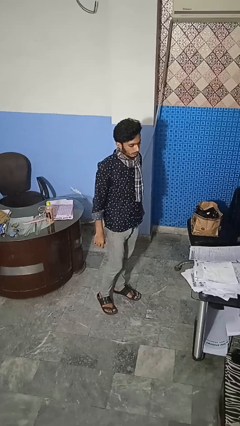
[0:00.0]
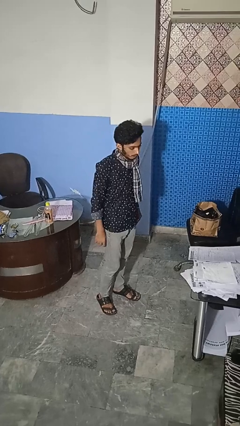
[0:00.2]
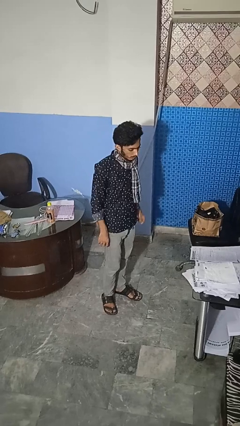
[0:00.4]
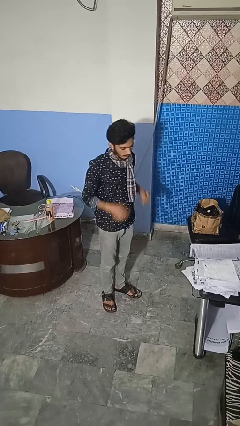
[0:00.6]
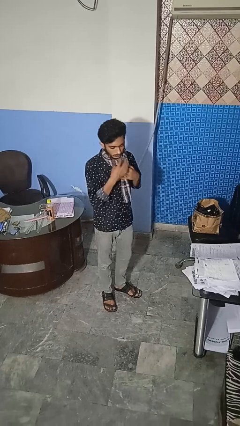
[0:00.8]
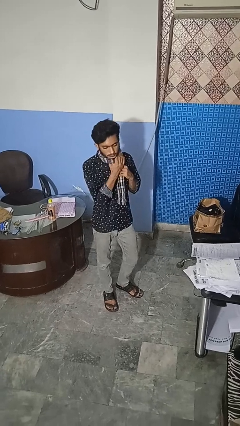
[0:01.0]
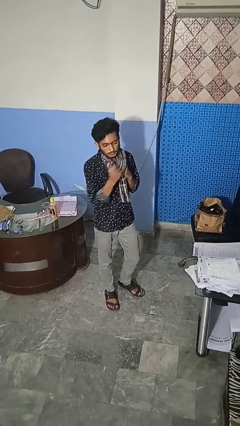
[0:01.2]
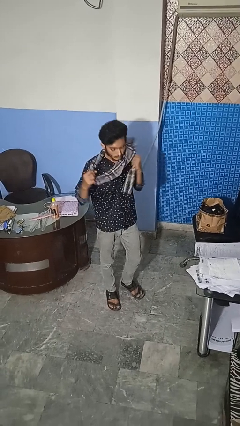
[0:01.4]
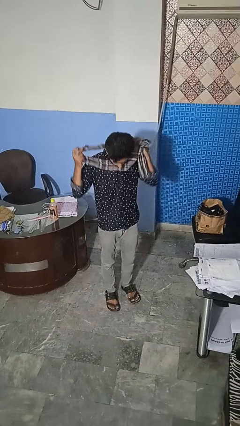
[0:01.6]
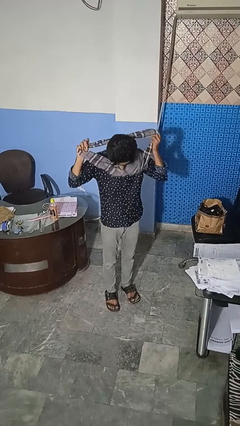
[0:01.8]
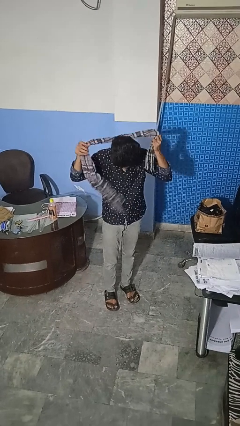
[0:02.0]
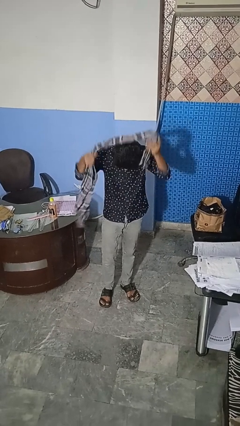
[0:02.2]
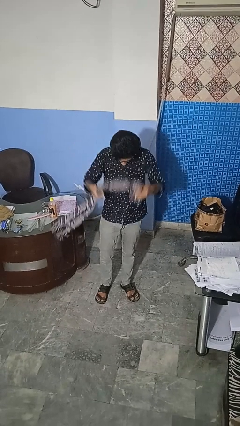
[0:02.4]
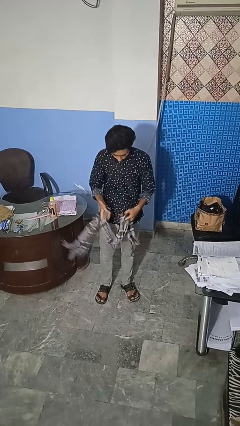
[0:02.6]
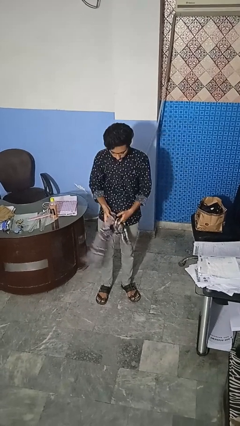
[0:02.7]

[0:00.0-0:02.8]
person takes off scarf

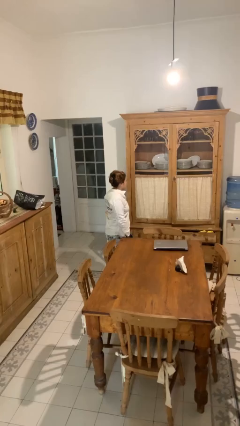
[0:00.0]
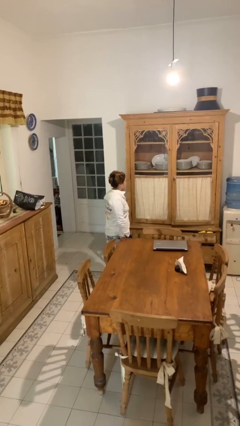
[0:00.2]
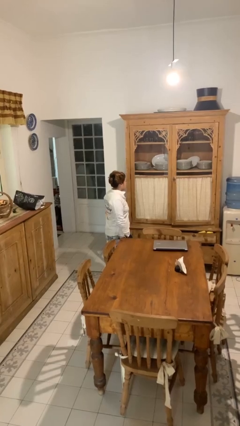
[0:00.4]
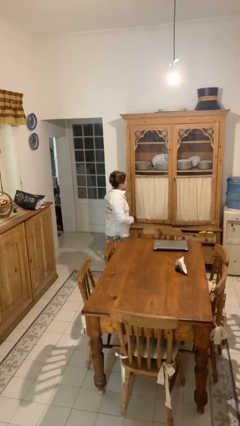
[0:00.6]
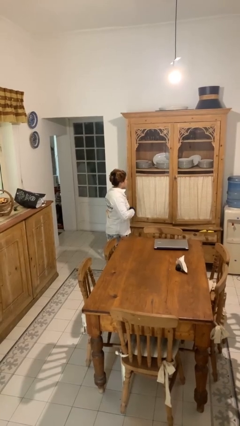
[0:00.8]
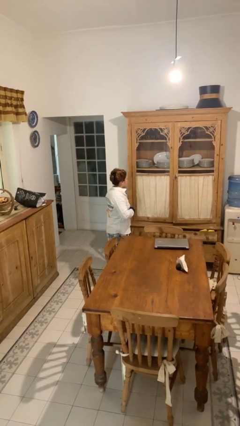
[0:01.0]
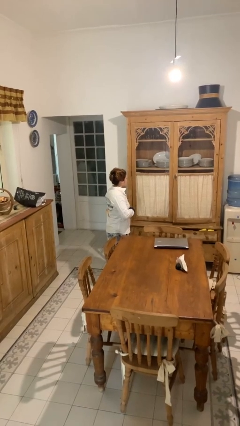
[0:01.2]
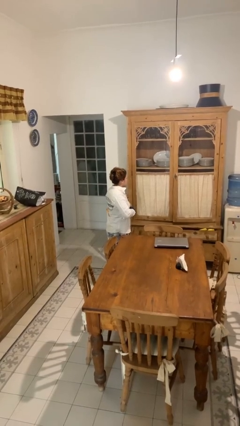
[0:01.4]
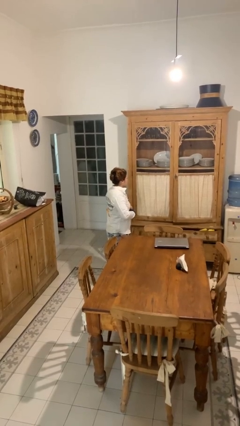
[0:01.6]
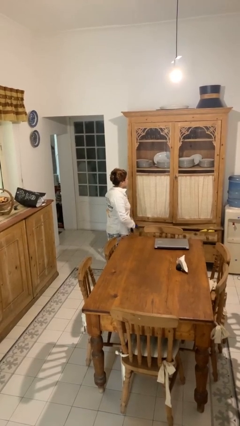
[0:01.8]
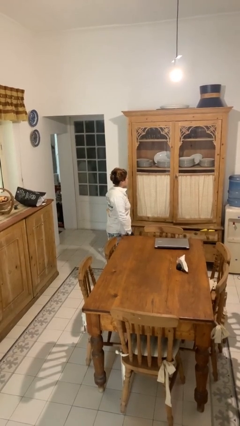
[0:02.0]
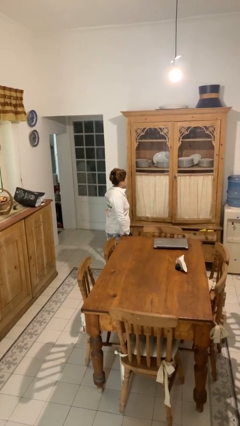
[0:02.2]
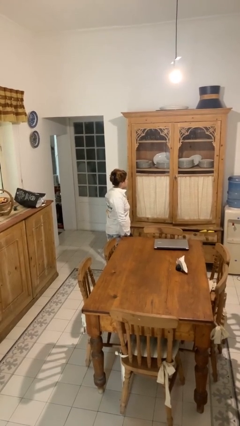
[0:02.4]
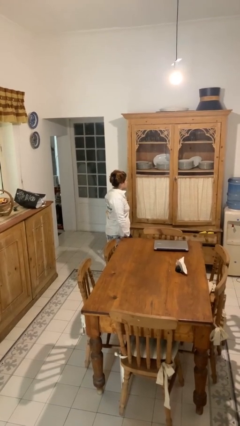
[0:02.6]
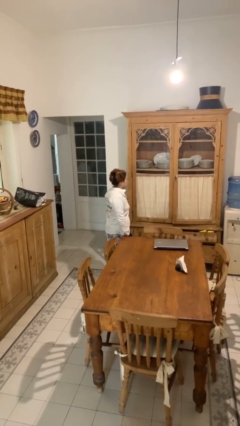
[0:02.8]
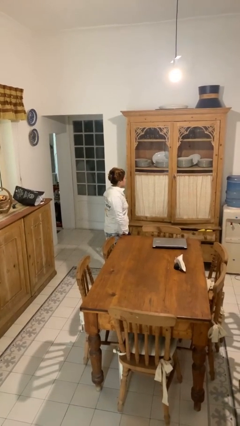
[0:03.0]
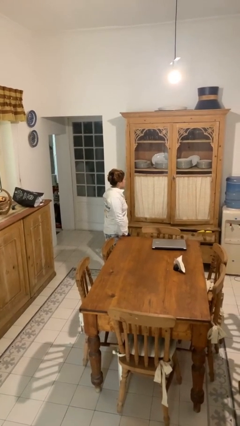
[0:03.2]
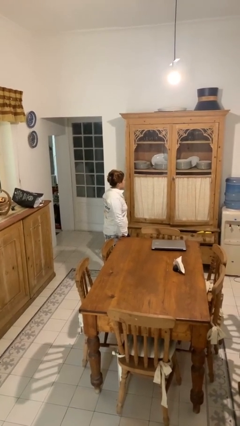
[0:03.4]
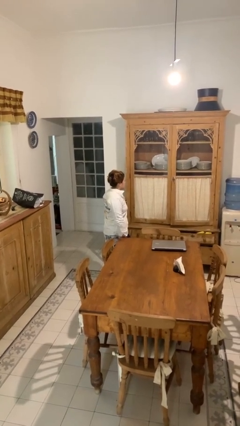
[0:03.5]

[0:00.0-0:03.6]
person buttons shirt

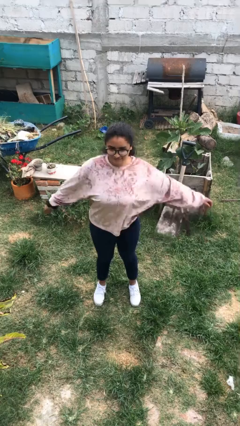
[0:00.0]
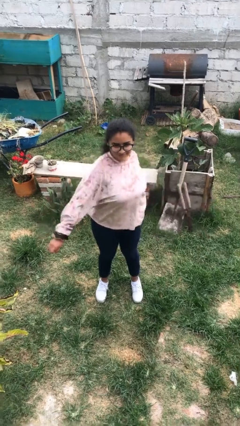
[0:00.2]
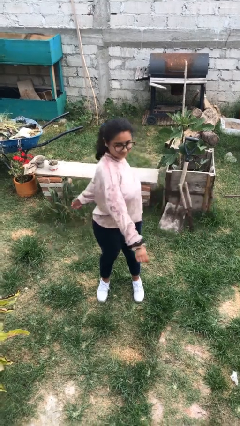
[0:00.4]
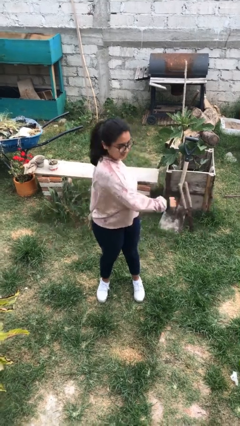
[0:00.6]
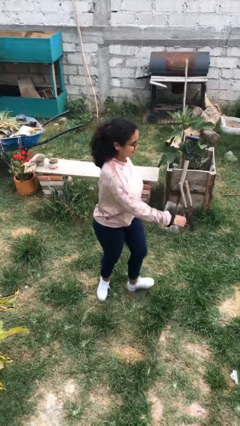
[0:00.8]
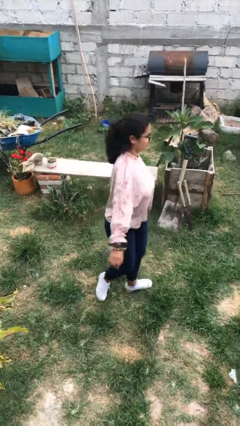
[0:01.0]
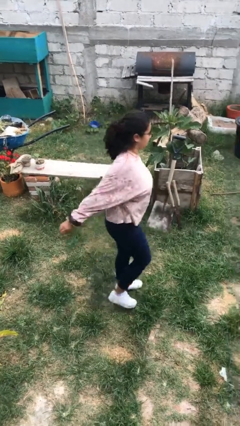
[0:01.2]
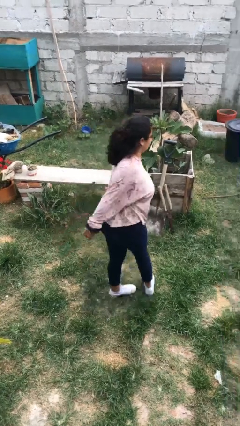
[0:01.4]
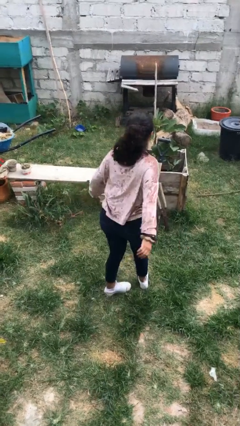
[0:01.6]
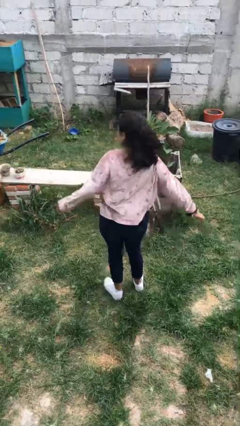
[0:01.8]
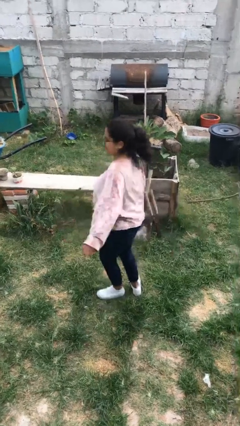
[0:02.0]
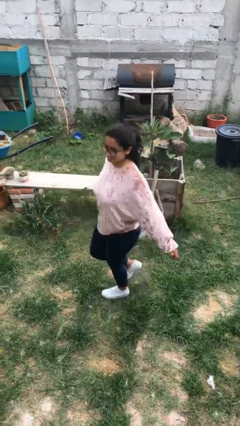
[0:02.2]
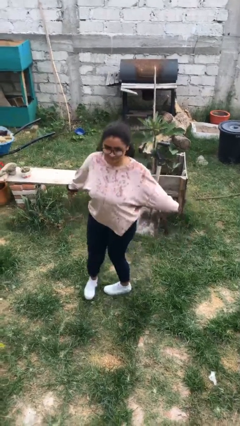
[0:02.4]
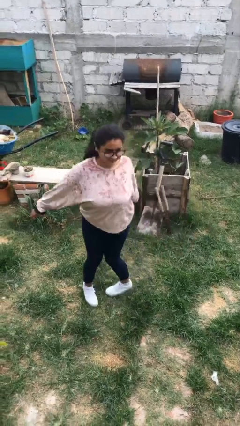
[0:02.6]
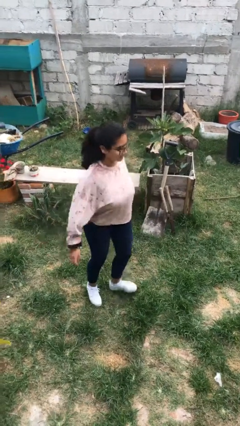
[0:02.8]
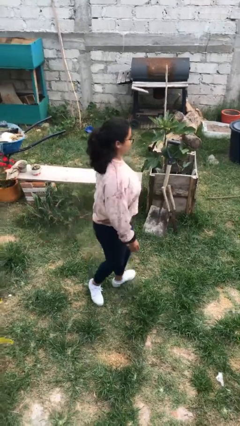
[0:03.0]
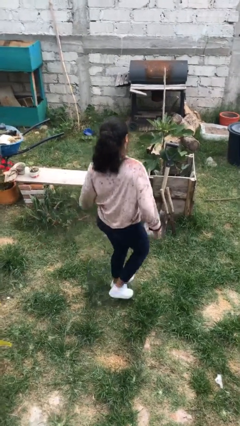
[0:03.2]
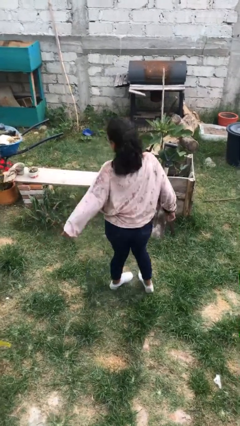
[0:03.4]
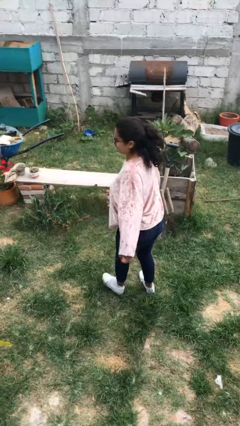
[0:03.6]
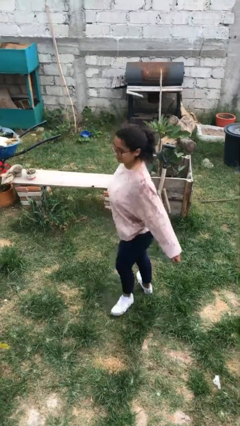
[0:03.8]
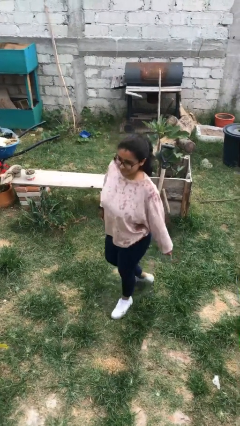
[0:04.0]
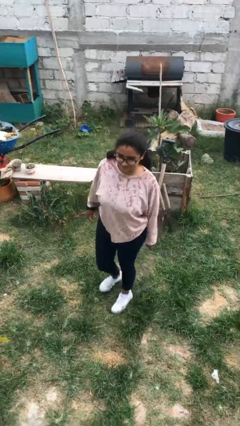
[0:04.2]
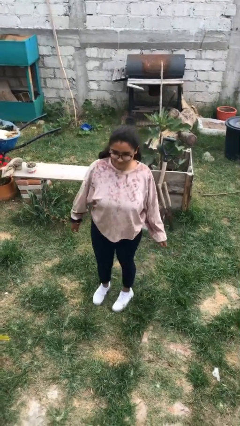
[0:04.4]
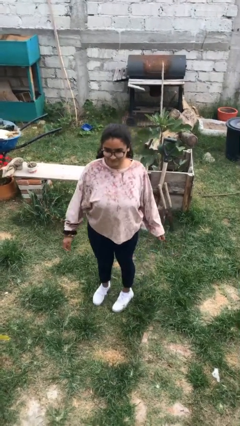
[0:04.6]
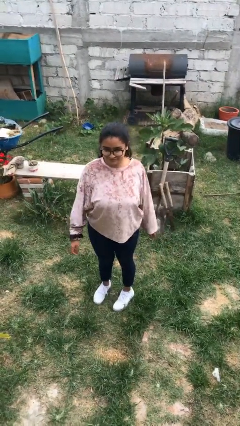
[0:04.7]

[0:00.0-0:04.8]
person twirls

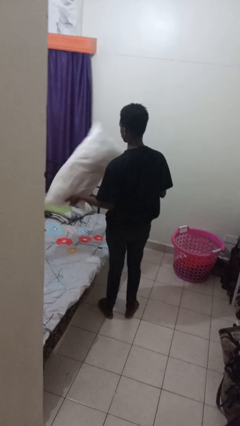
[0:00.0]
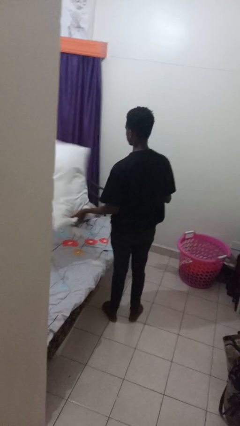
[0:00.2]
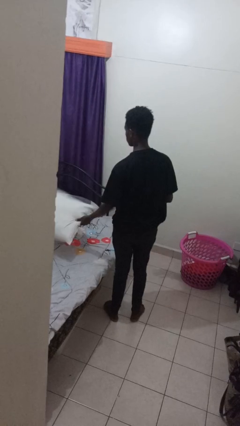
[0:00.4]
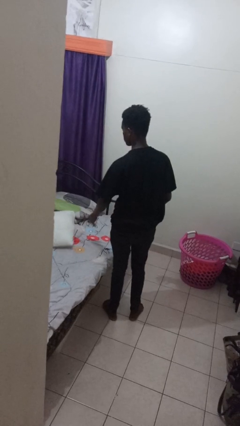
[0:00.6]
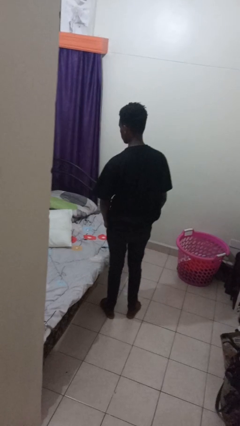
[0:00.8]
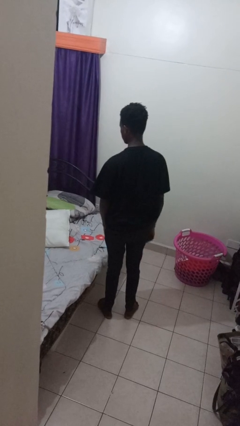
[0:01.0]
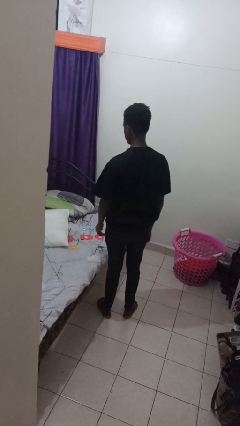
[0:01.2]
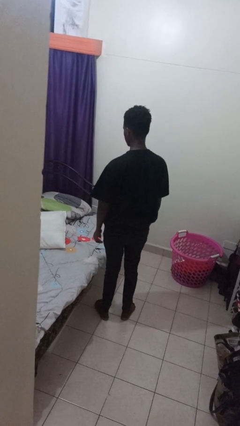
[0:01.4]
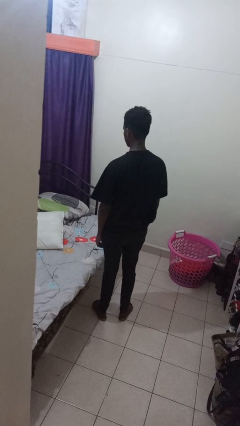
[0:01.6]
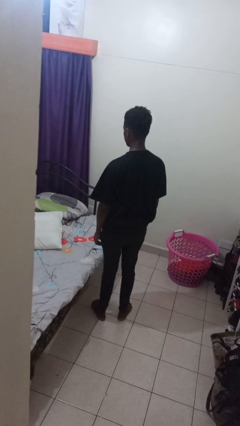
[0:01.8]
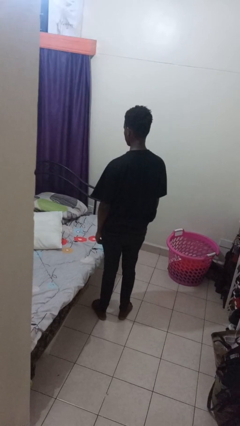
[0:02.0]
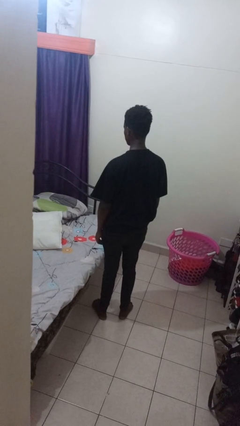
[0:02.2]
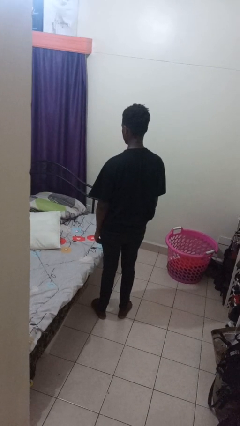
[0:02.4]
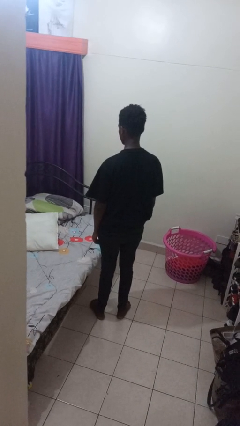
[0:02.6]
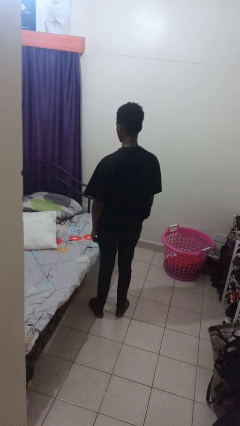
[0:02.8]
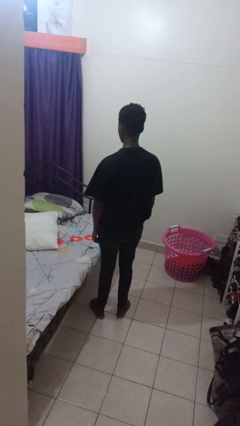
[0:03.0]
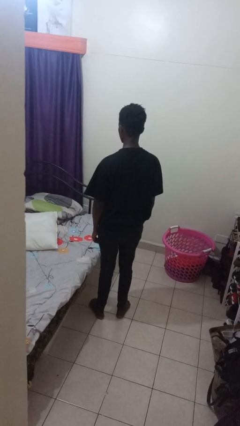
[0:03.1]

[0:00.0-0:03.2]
person puts down object on bed

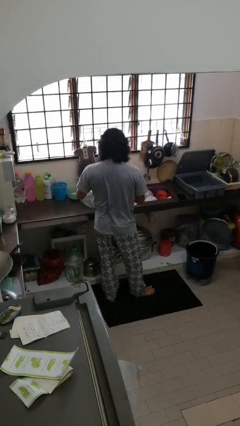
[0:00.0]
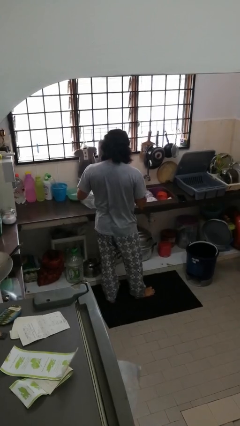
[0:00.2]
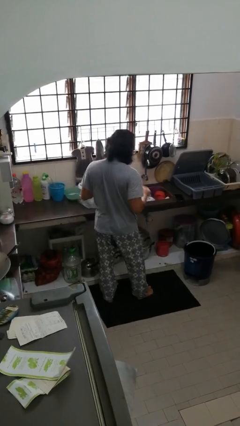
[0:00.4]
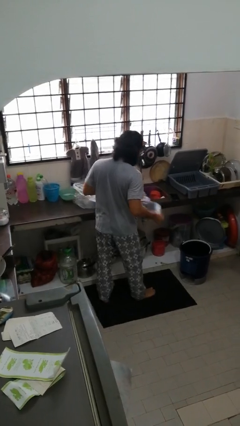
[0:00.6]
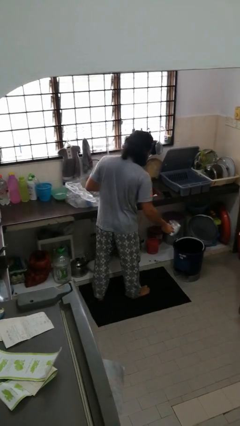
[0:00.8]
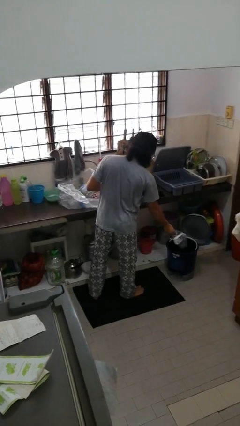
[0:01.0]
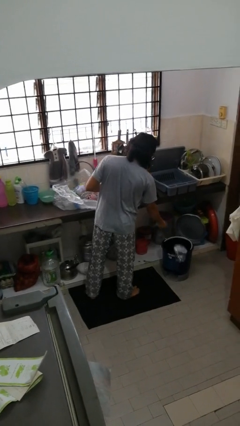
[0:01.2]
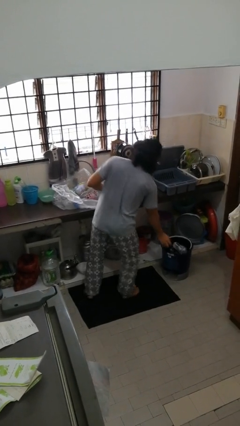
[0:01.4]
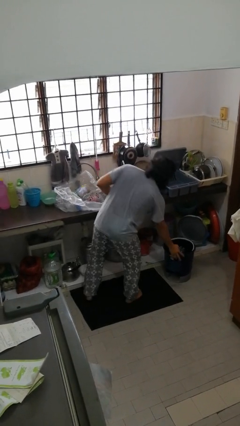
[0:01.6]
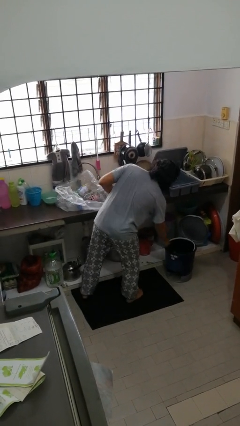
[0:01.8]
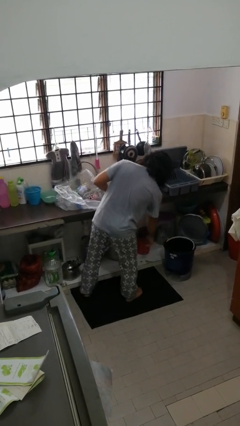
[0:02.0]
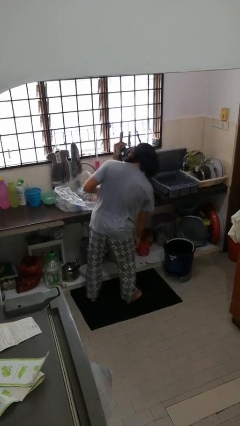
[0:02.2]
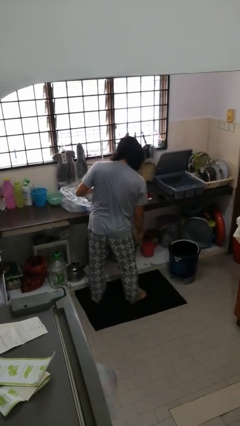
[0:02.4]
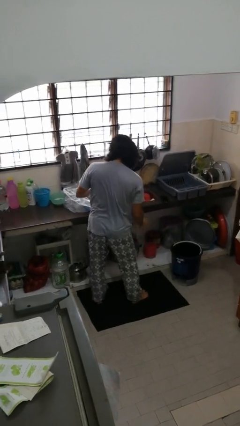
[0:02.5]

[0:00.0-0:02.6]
person discards trash
